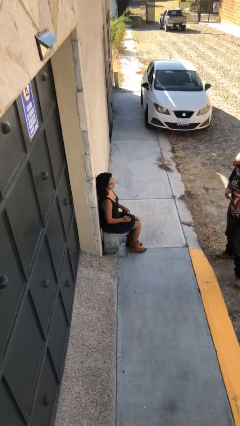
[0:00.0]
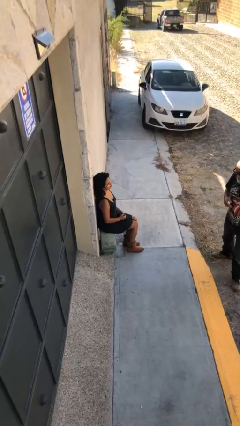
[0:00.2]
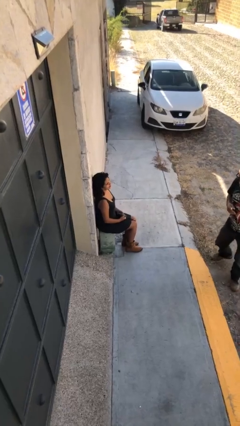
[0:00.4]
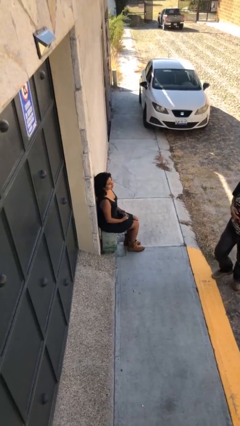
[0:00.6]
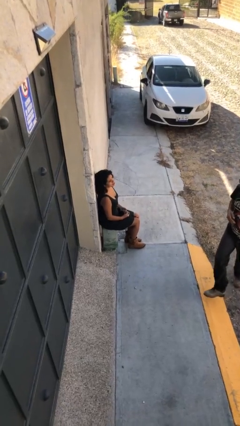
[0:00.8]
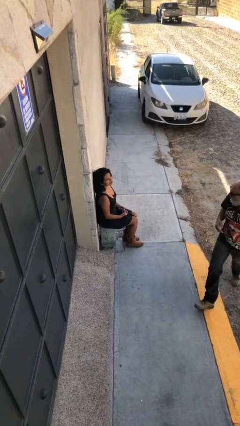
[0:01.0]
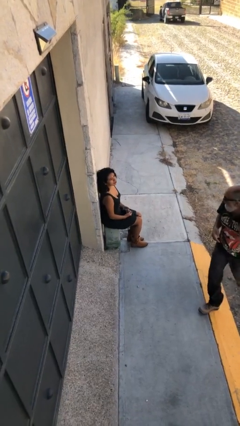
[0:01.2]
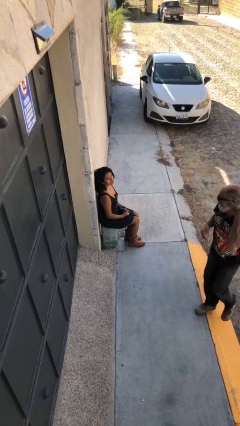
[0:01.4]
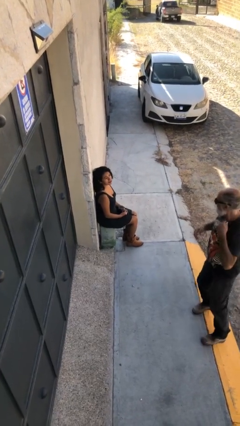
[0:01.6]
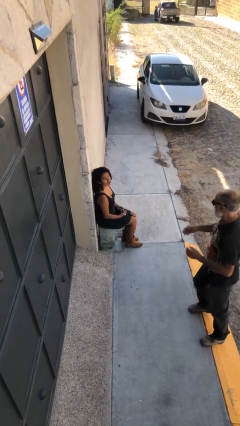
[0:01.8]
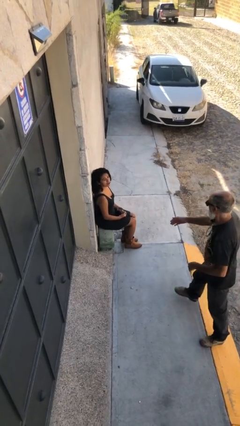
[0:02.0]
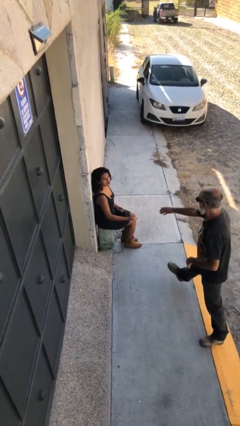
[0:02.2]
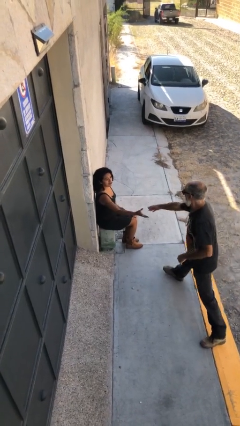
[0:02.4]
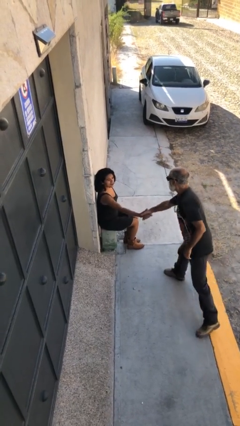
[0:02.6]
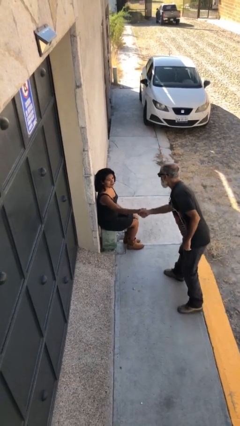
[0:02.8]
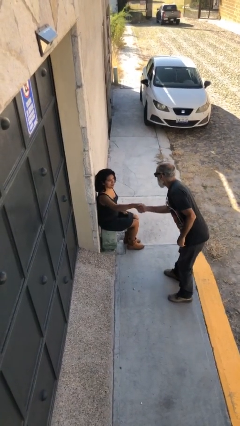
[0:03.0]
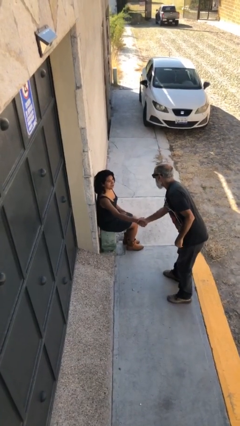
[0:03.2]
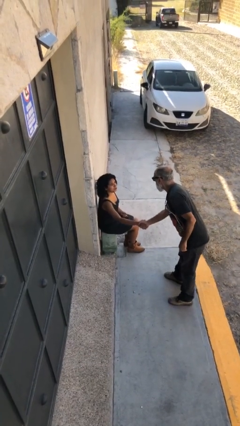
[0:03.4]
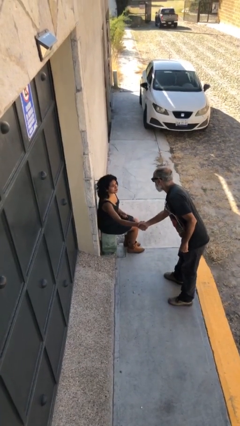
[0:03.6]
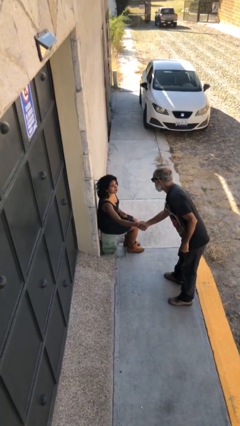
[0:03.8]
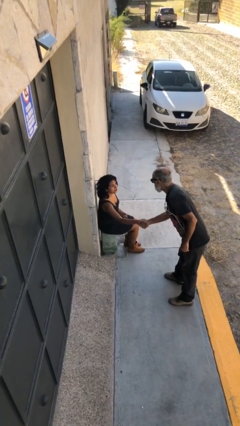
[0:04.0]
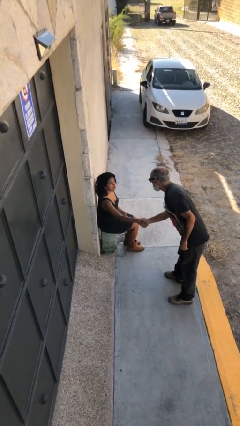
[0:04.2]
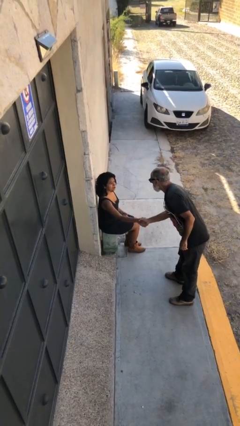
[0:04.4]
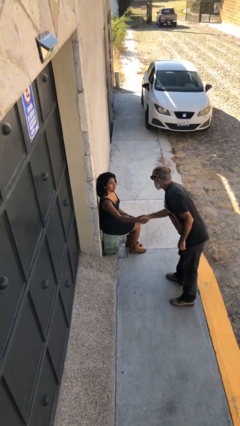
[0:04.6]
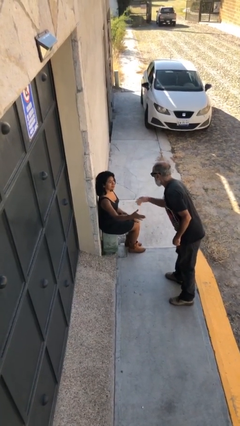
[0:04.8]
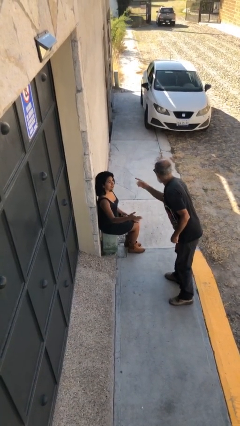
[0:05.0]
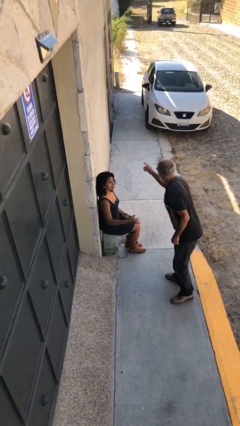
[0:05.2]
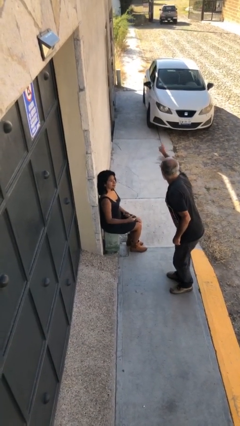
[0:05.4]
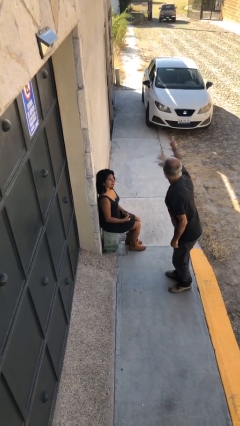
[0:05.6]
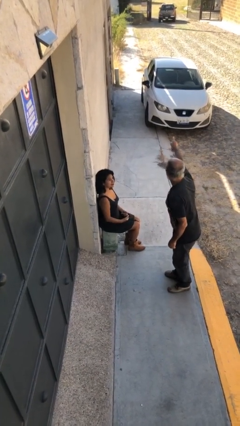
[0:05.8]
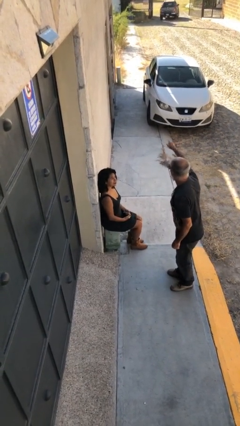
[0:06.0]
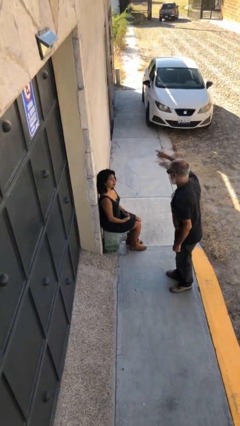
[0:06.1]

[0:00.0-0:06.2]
person shakes hand

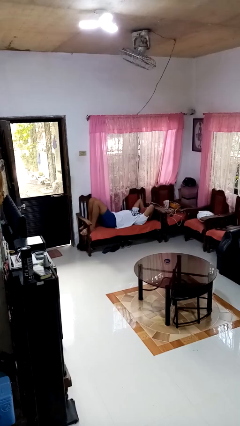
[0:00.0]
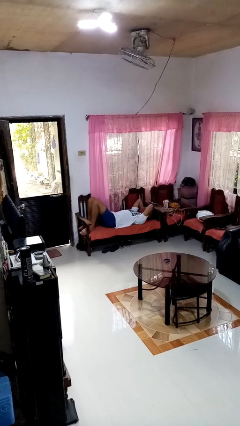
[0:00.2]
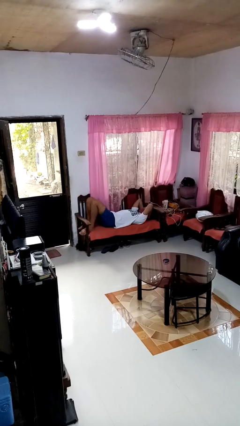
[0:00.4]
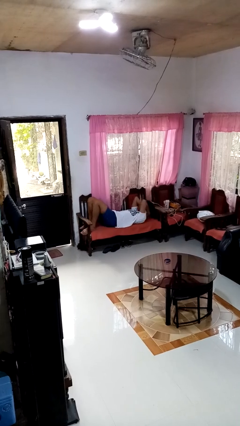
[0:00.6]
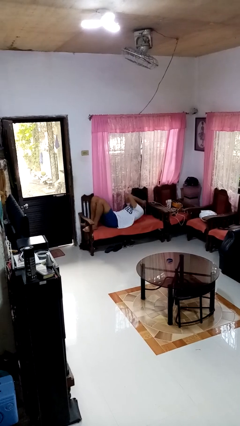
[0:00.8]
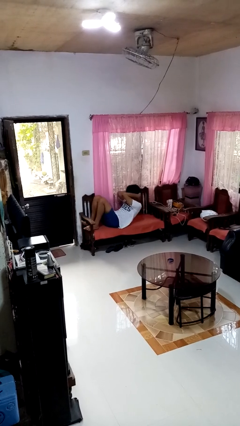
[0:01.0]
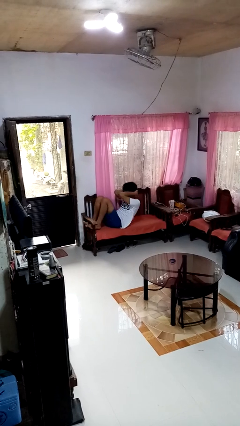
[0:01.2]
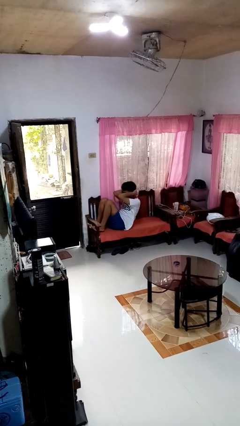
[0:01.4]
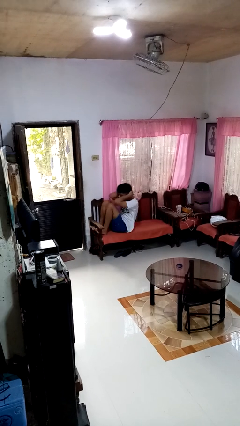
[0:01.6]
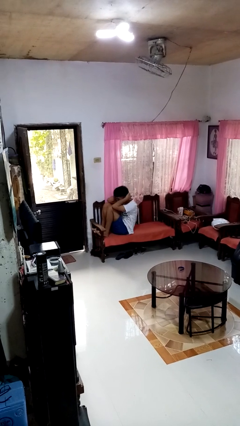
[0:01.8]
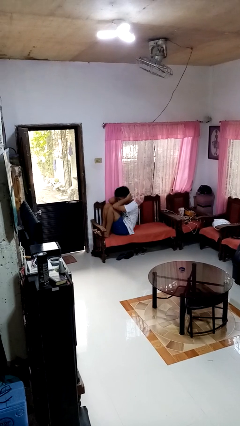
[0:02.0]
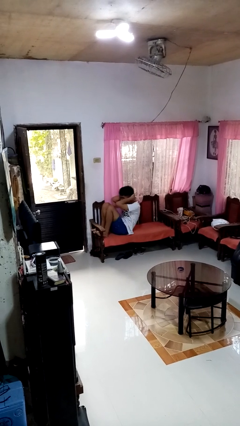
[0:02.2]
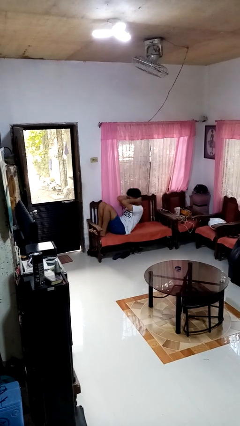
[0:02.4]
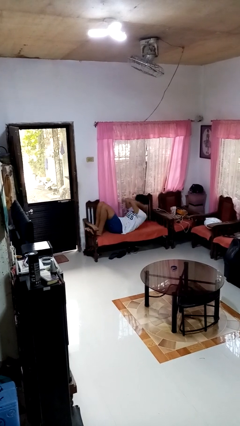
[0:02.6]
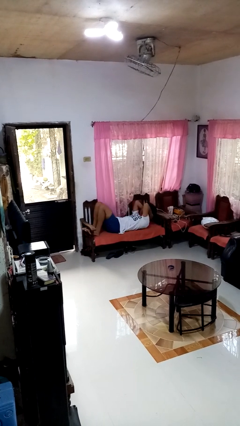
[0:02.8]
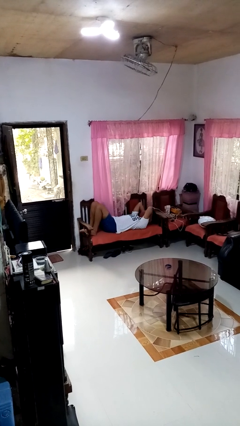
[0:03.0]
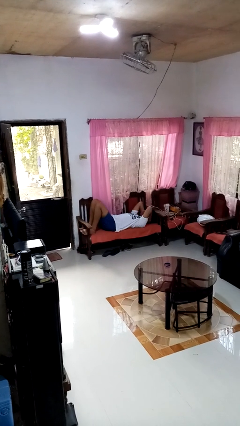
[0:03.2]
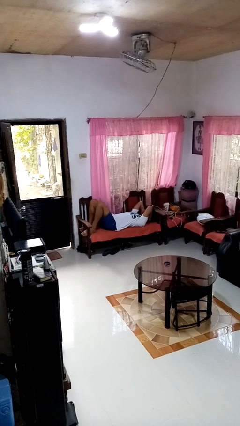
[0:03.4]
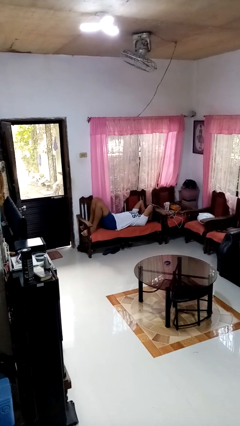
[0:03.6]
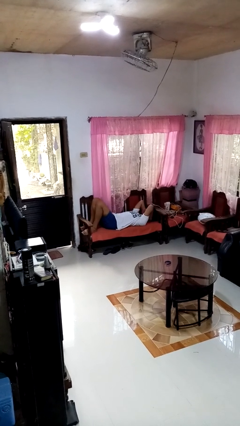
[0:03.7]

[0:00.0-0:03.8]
person exercises with situp

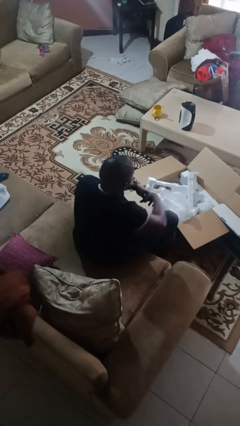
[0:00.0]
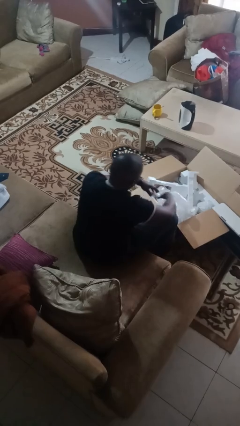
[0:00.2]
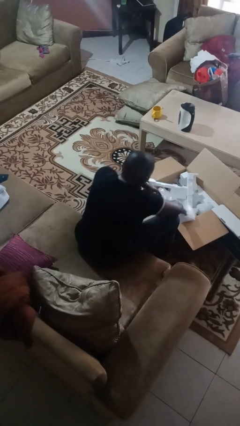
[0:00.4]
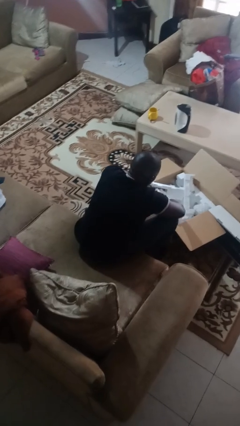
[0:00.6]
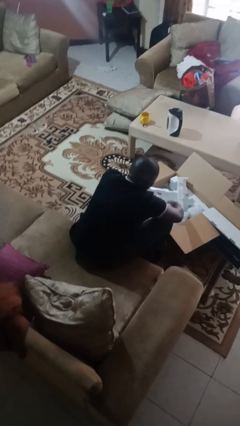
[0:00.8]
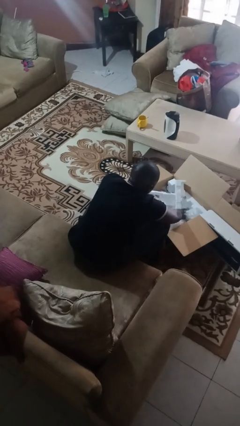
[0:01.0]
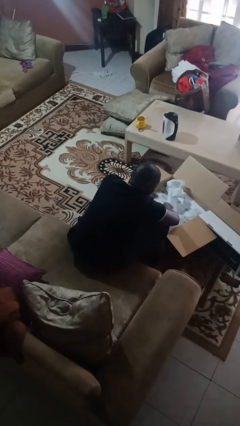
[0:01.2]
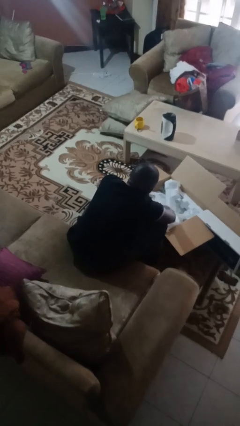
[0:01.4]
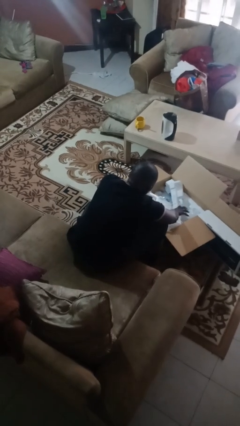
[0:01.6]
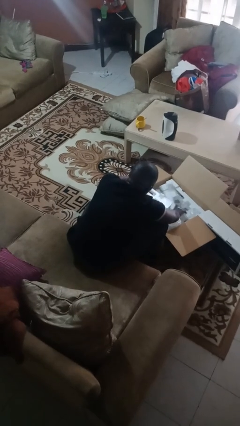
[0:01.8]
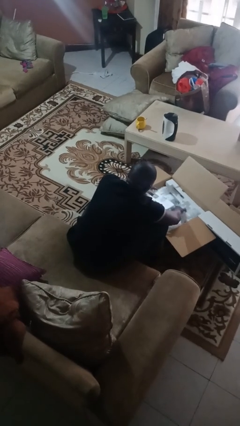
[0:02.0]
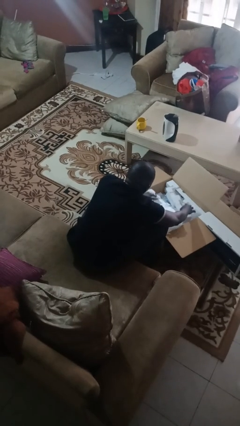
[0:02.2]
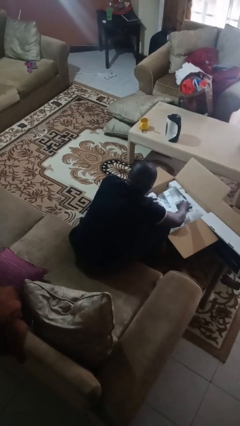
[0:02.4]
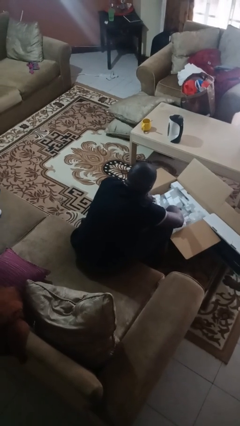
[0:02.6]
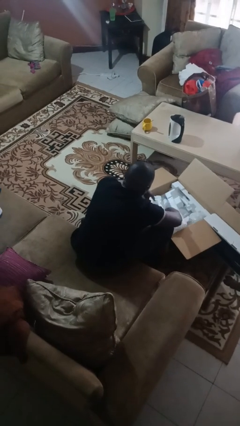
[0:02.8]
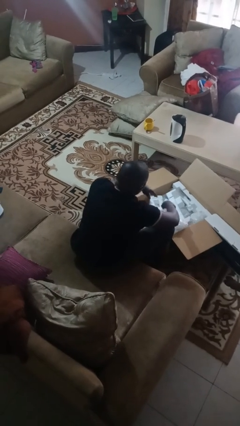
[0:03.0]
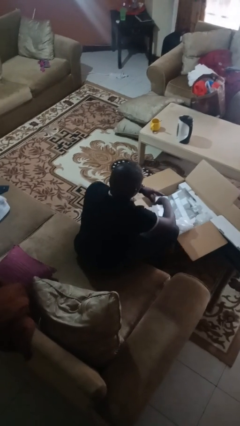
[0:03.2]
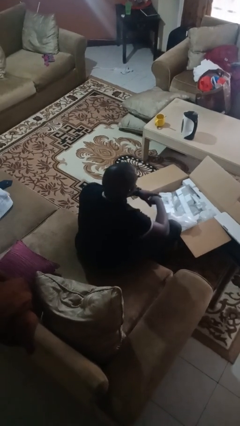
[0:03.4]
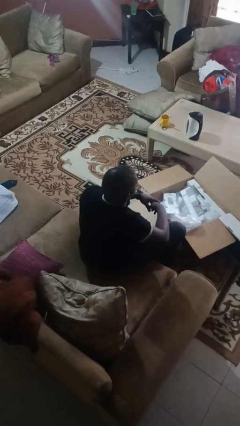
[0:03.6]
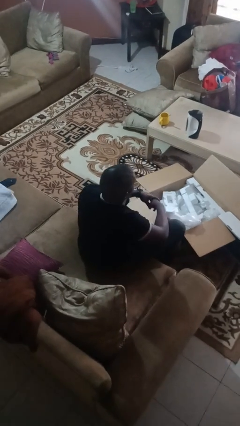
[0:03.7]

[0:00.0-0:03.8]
person searches in box

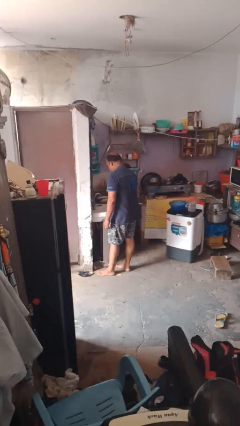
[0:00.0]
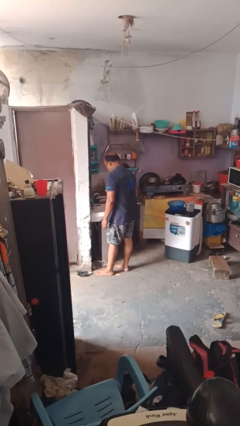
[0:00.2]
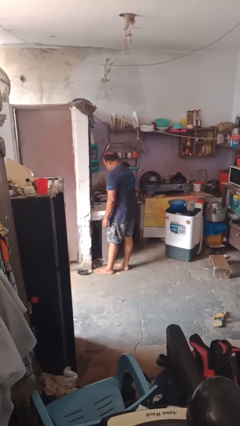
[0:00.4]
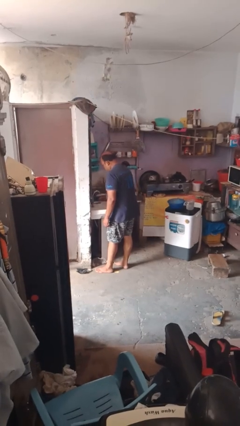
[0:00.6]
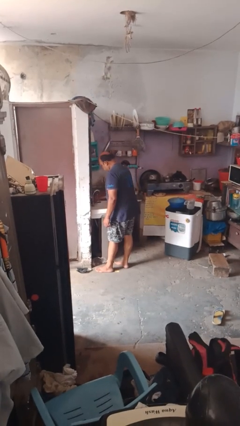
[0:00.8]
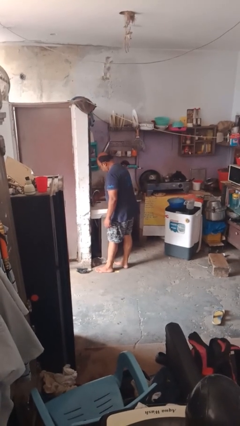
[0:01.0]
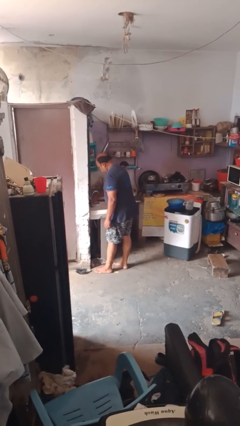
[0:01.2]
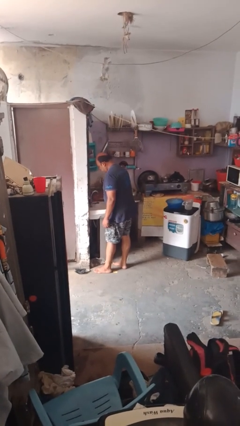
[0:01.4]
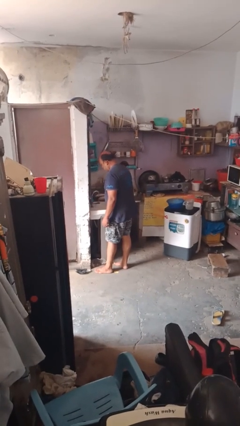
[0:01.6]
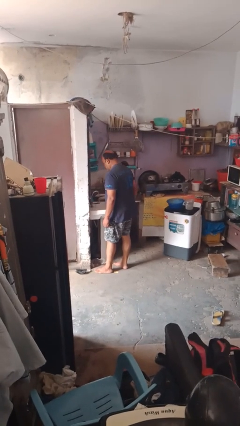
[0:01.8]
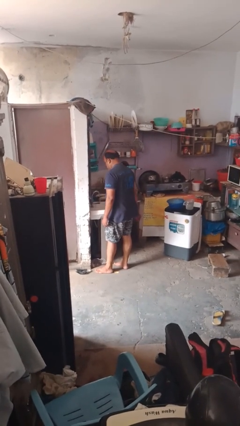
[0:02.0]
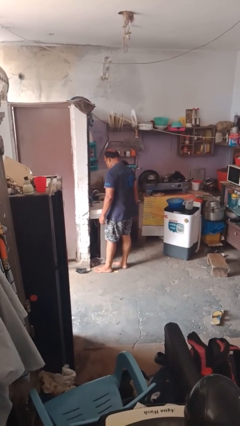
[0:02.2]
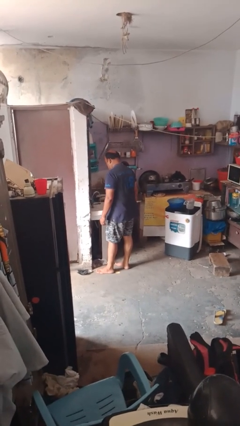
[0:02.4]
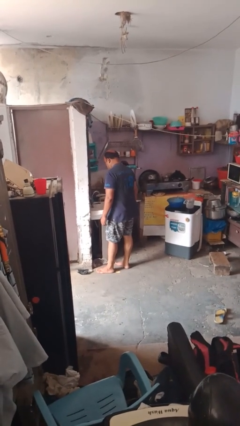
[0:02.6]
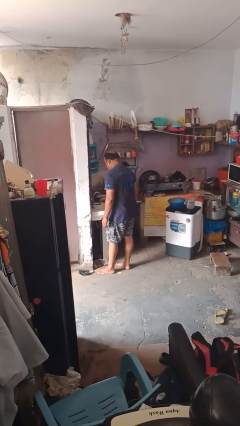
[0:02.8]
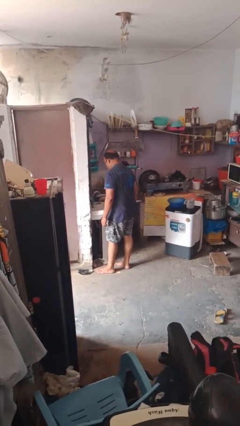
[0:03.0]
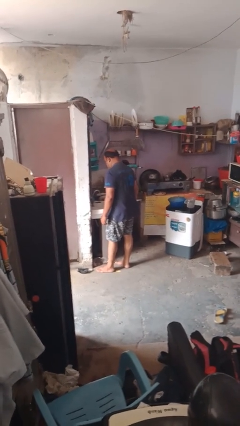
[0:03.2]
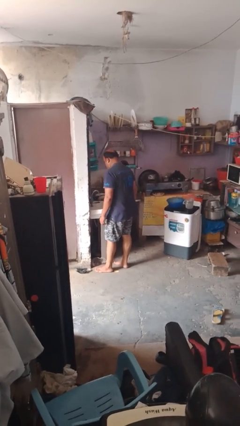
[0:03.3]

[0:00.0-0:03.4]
person turns on faucet

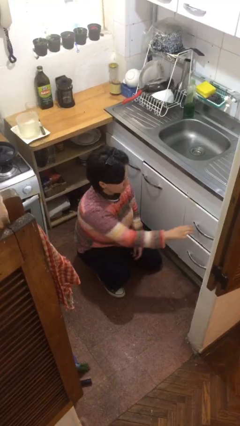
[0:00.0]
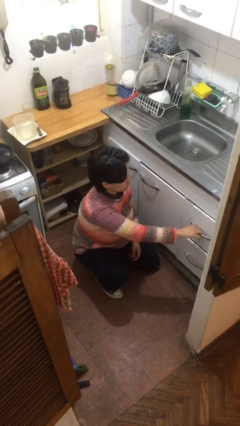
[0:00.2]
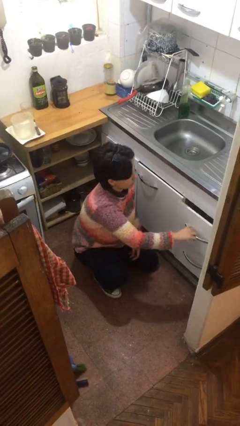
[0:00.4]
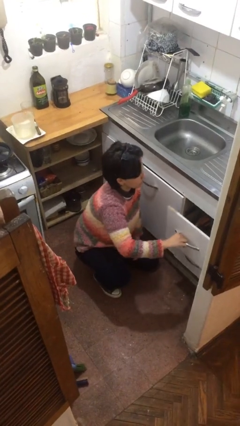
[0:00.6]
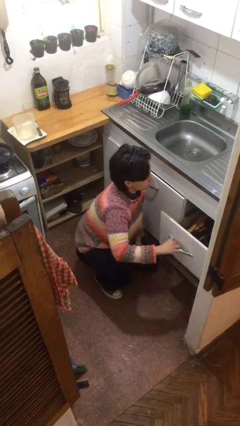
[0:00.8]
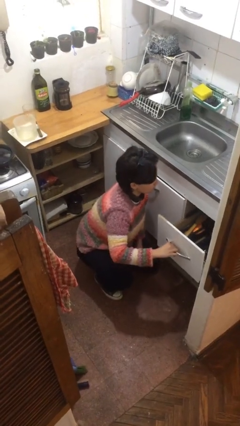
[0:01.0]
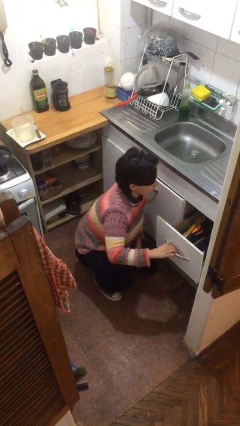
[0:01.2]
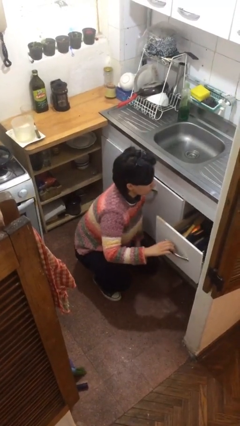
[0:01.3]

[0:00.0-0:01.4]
person opens kitchen drawer
